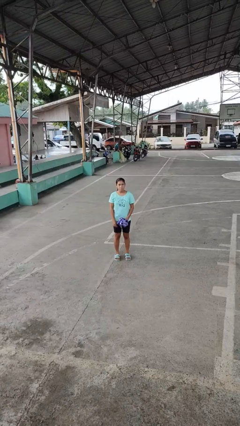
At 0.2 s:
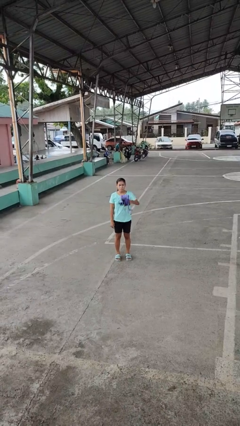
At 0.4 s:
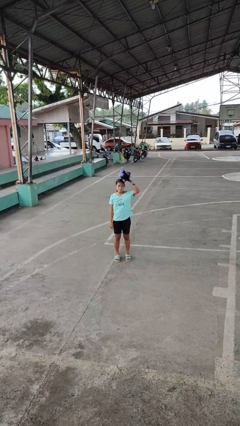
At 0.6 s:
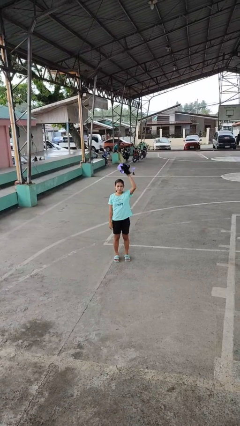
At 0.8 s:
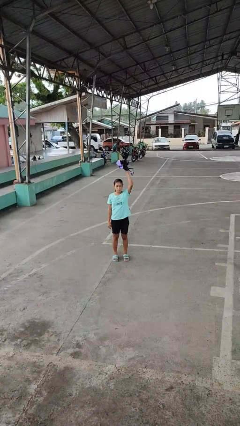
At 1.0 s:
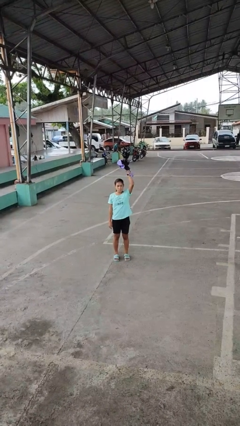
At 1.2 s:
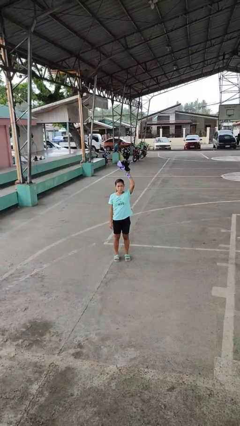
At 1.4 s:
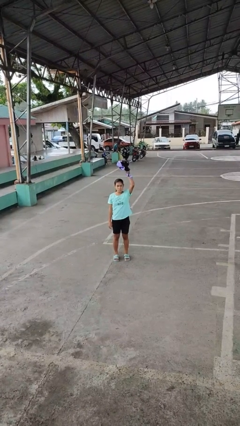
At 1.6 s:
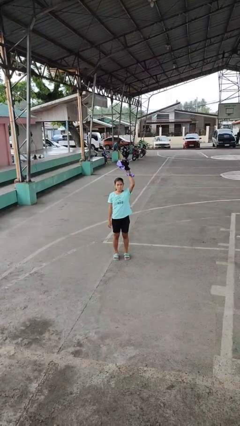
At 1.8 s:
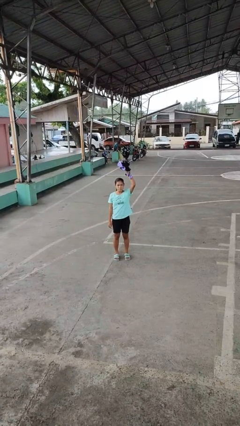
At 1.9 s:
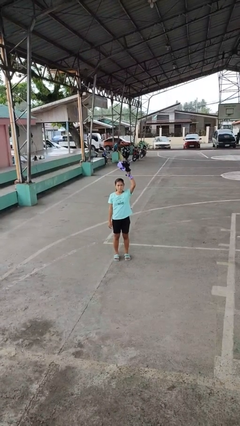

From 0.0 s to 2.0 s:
person holds object above head

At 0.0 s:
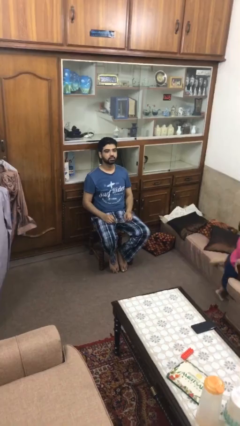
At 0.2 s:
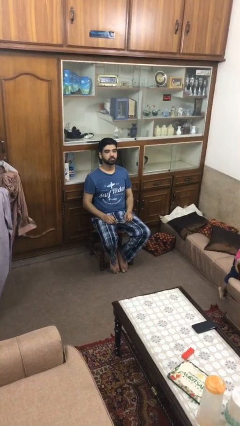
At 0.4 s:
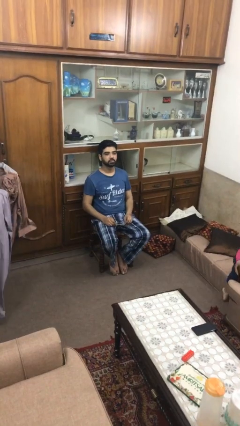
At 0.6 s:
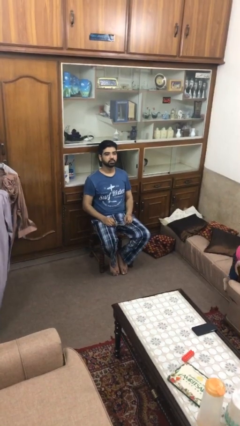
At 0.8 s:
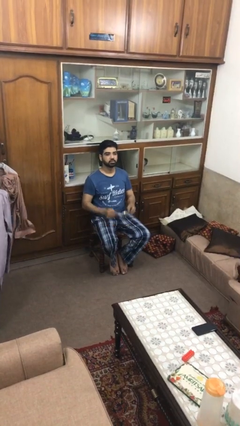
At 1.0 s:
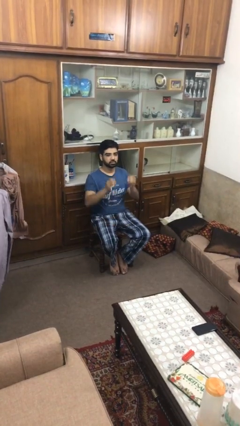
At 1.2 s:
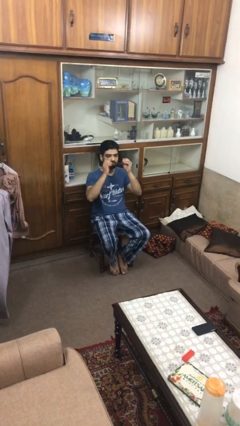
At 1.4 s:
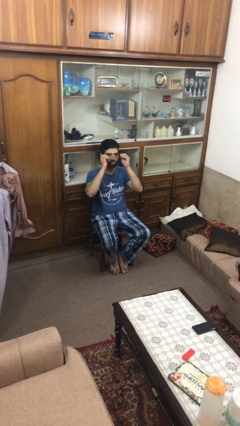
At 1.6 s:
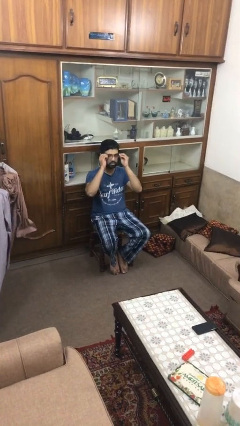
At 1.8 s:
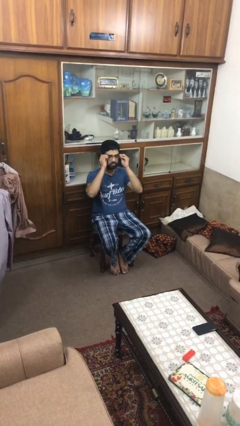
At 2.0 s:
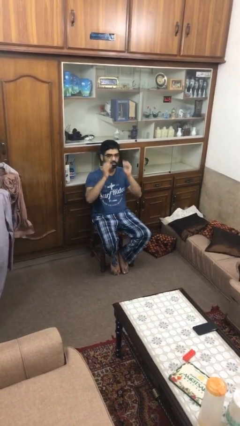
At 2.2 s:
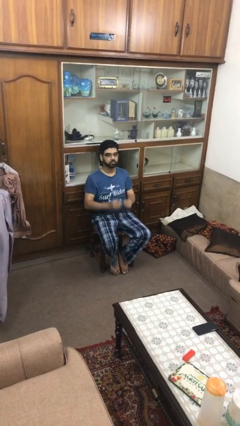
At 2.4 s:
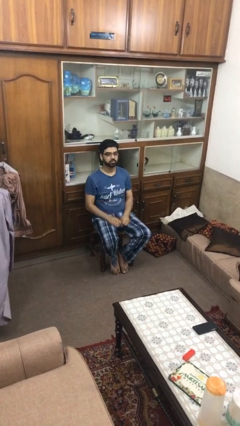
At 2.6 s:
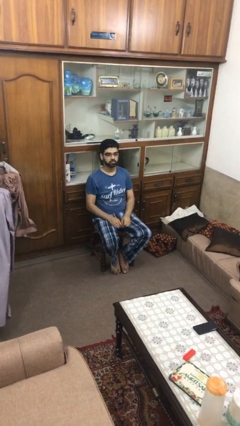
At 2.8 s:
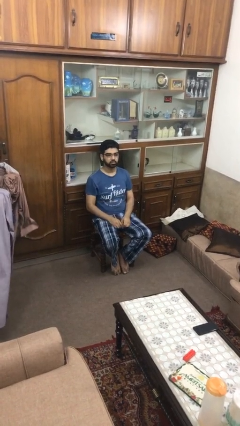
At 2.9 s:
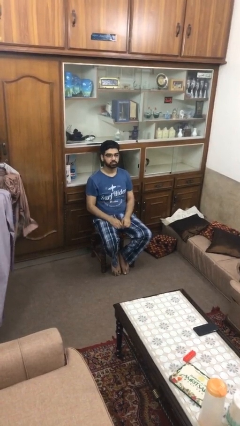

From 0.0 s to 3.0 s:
person puts on glasses

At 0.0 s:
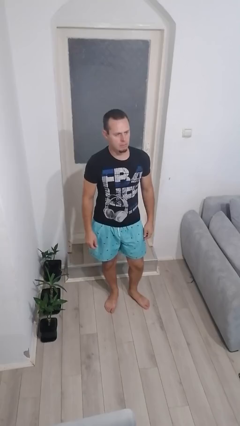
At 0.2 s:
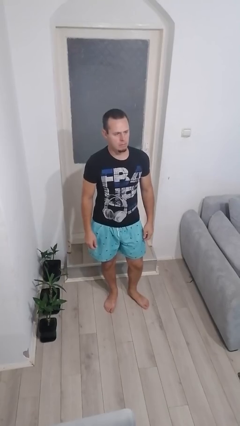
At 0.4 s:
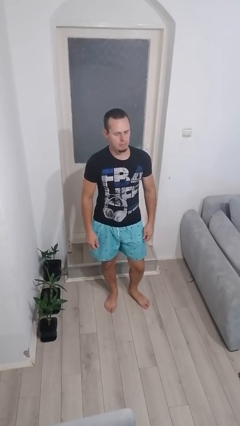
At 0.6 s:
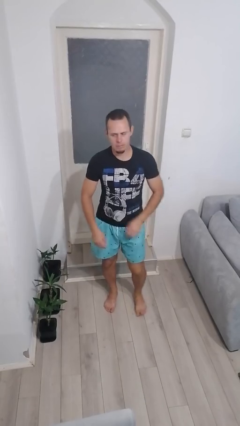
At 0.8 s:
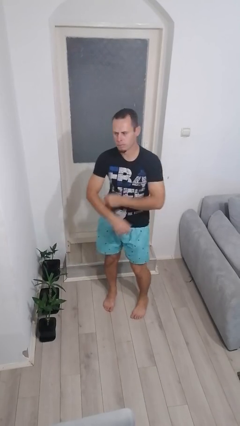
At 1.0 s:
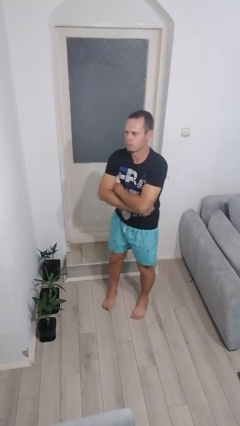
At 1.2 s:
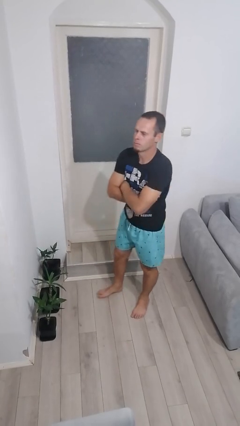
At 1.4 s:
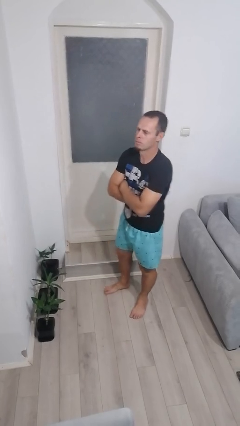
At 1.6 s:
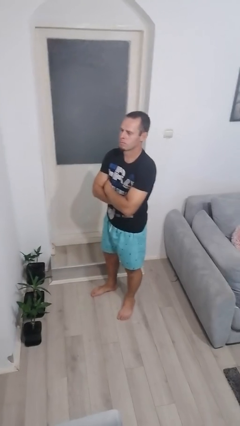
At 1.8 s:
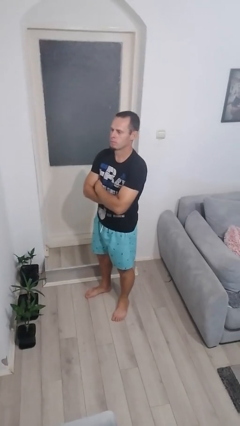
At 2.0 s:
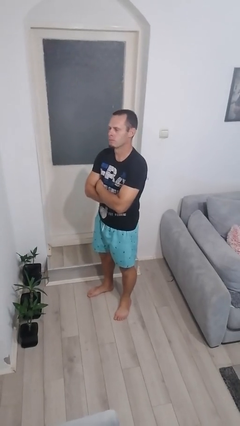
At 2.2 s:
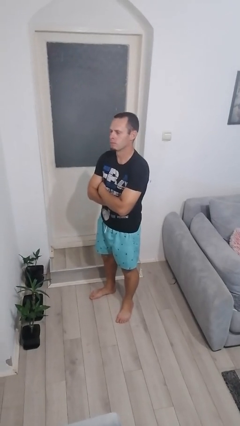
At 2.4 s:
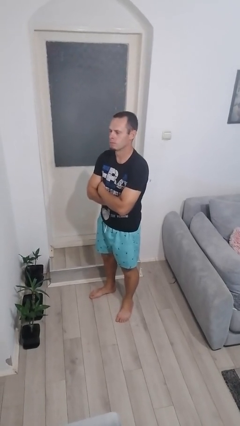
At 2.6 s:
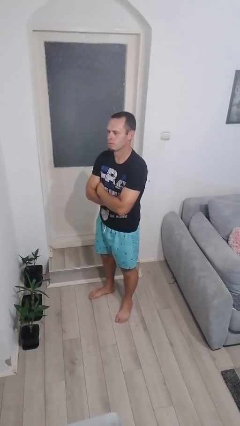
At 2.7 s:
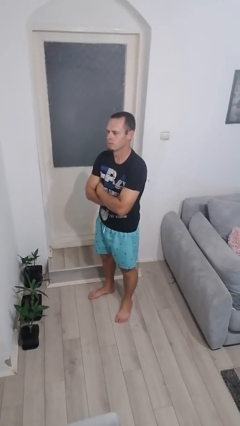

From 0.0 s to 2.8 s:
person crosses arms

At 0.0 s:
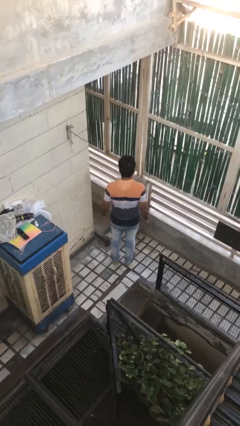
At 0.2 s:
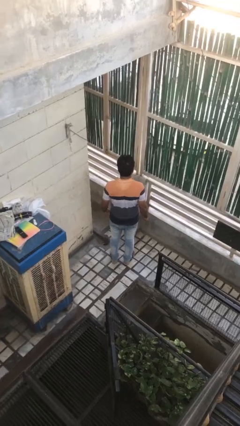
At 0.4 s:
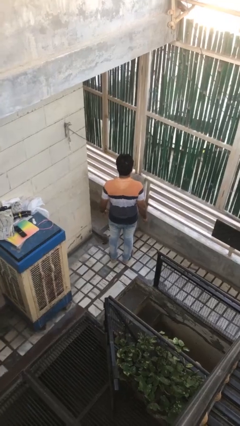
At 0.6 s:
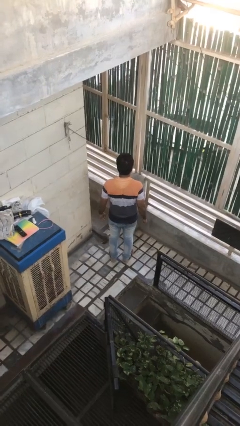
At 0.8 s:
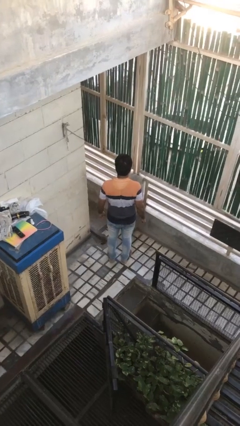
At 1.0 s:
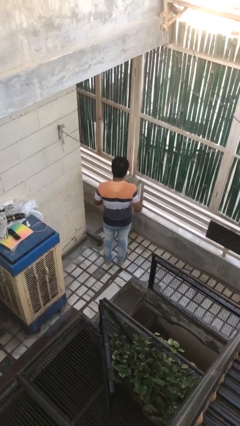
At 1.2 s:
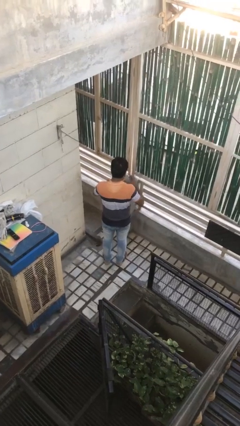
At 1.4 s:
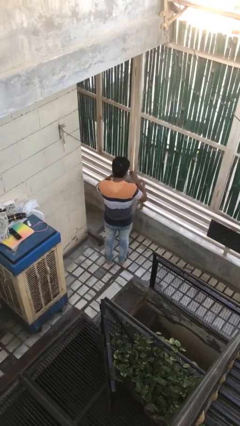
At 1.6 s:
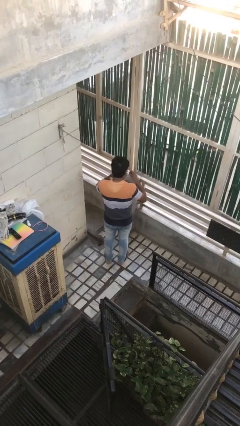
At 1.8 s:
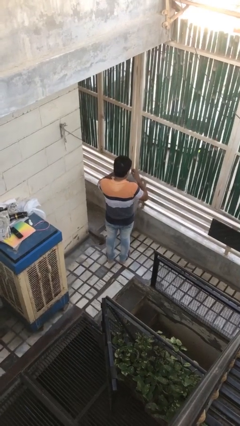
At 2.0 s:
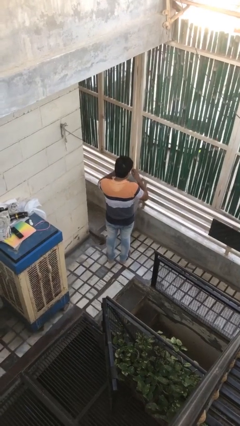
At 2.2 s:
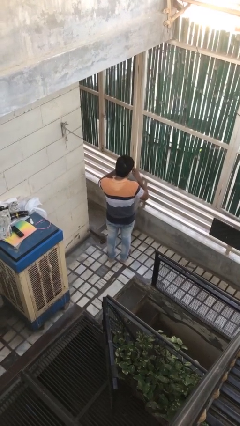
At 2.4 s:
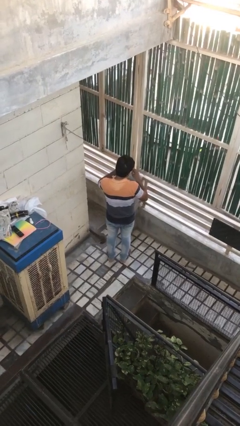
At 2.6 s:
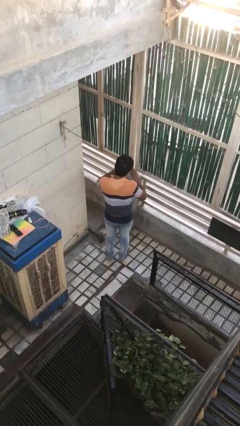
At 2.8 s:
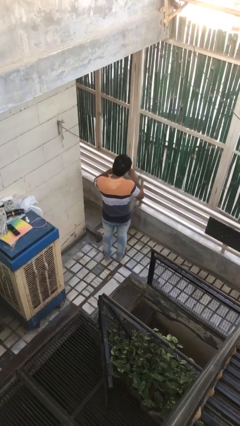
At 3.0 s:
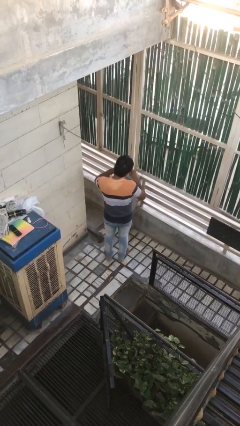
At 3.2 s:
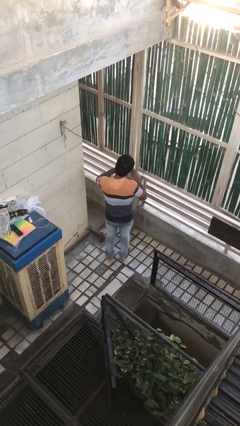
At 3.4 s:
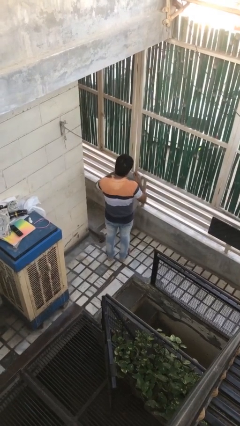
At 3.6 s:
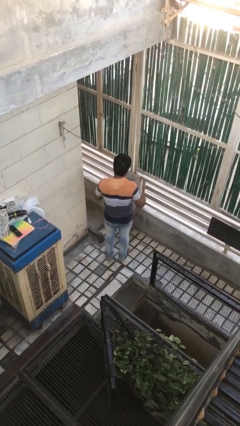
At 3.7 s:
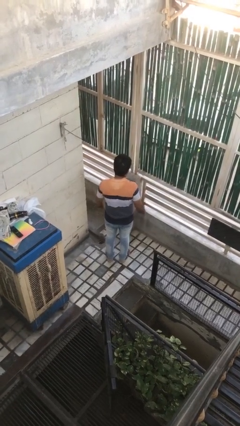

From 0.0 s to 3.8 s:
person files fingernails

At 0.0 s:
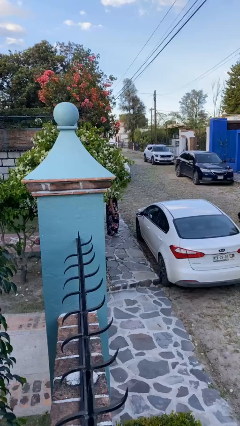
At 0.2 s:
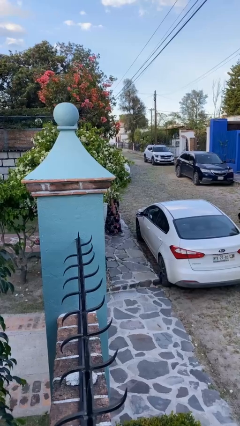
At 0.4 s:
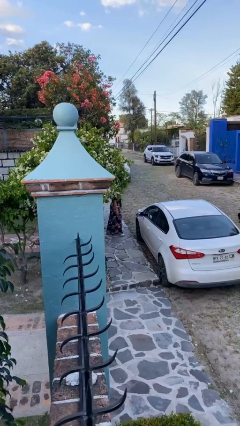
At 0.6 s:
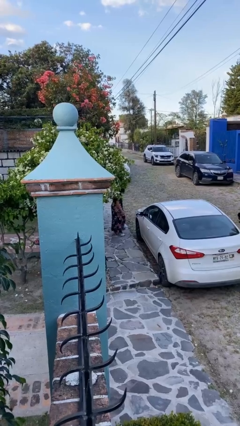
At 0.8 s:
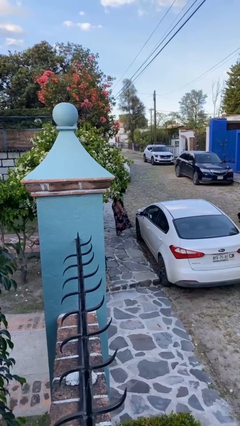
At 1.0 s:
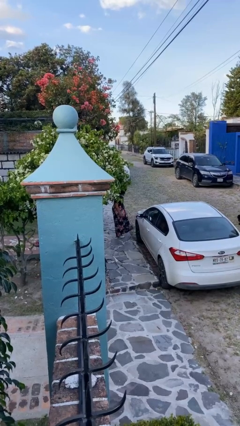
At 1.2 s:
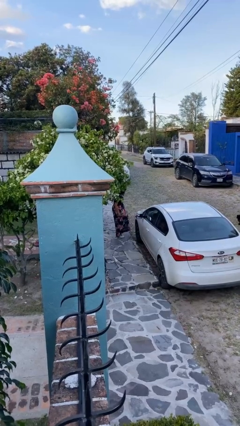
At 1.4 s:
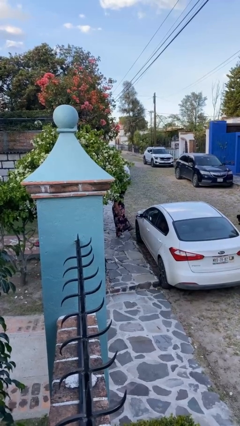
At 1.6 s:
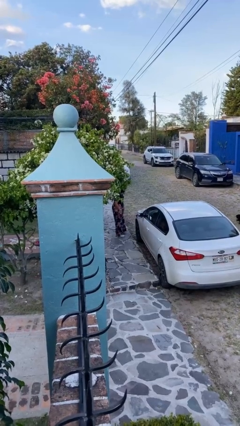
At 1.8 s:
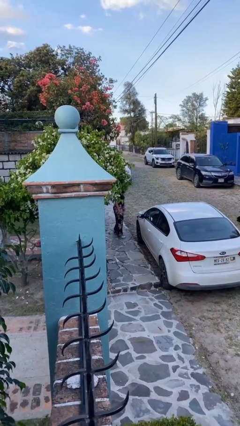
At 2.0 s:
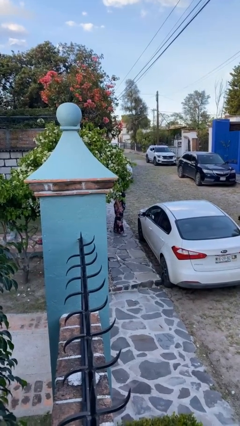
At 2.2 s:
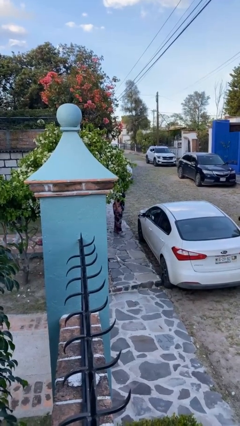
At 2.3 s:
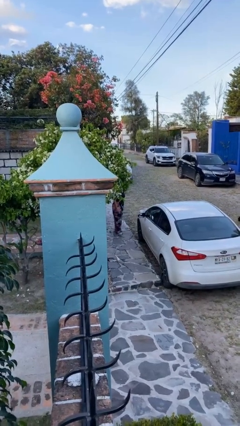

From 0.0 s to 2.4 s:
person kicks car tires

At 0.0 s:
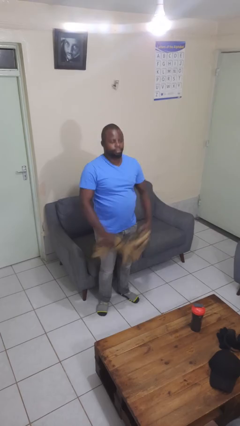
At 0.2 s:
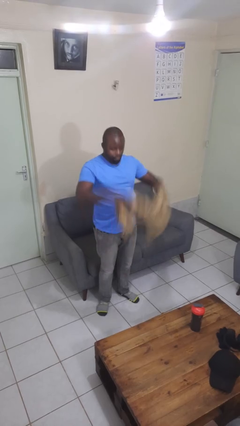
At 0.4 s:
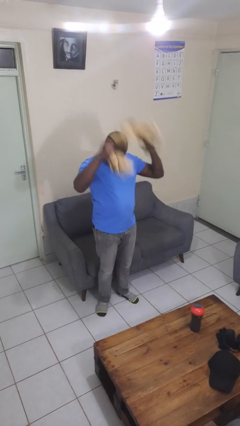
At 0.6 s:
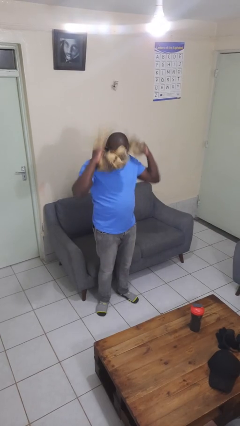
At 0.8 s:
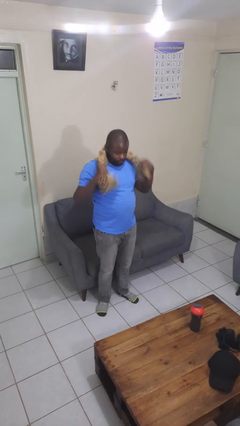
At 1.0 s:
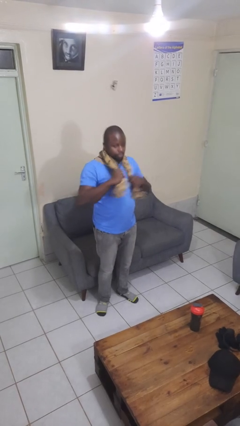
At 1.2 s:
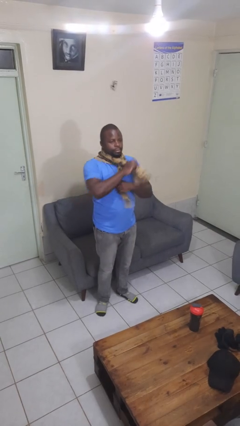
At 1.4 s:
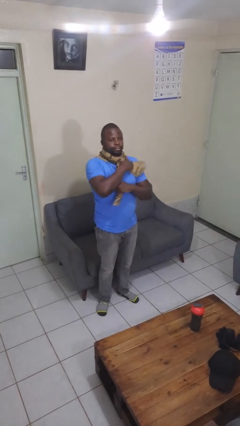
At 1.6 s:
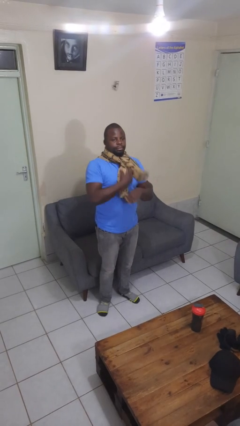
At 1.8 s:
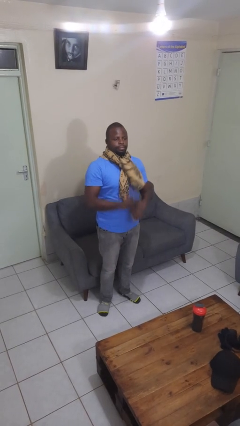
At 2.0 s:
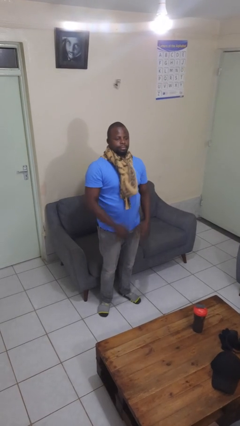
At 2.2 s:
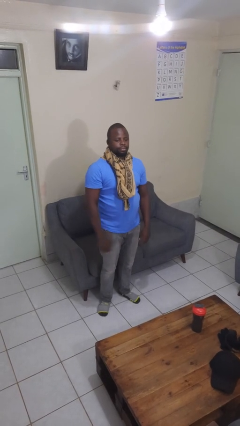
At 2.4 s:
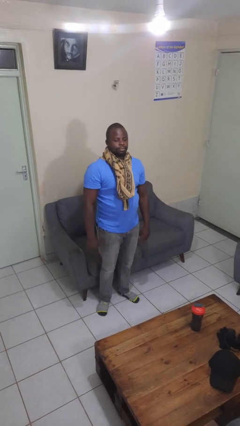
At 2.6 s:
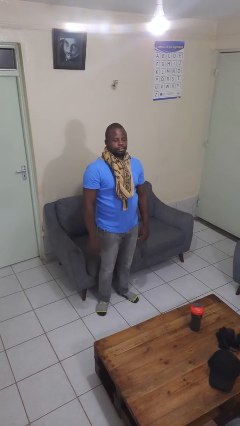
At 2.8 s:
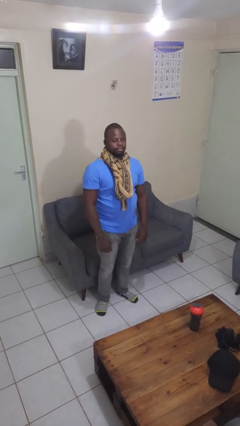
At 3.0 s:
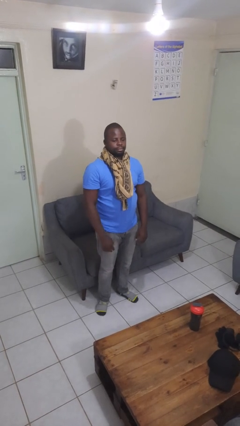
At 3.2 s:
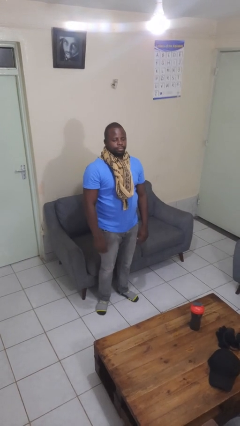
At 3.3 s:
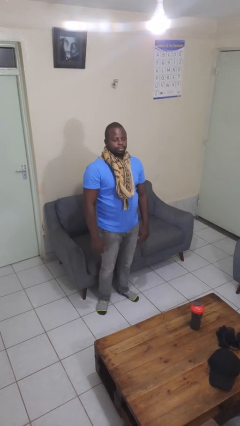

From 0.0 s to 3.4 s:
person puts on scarf
